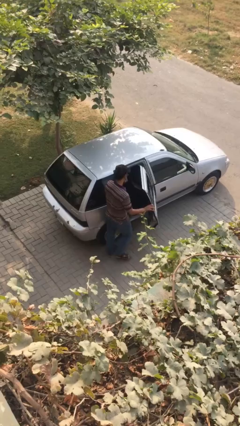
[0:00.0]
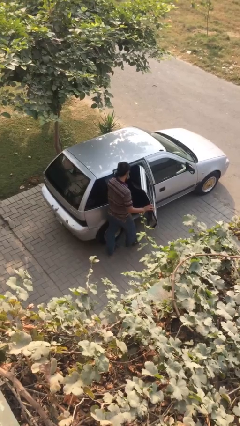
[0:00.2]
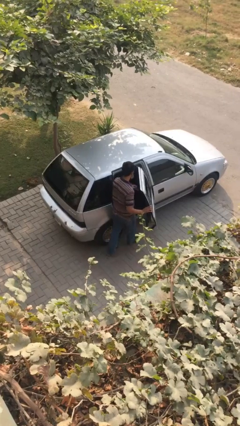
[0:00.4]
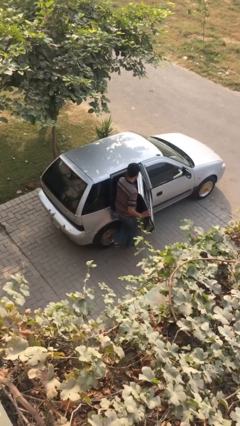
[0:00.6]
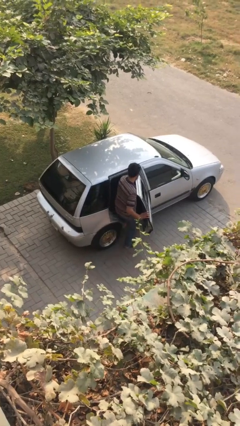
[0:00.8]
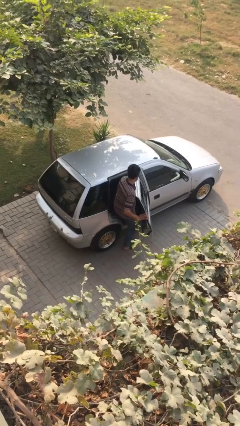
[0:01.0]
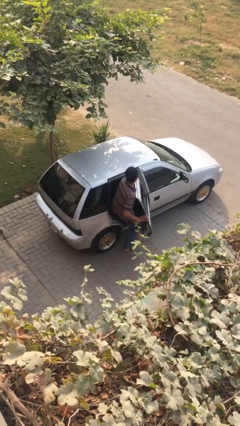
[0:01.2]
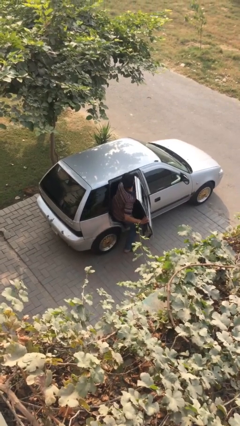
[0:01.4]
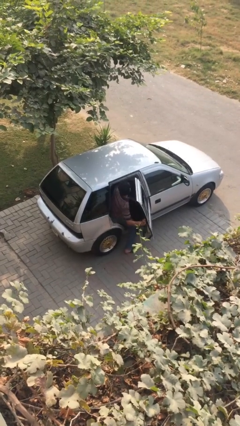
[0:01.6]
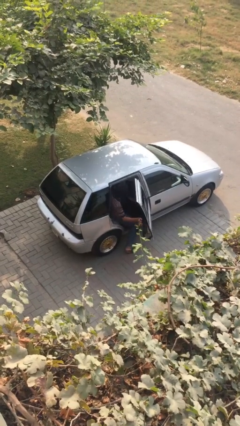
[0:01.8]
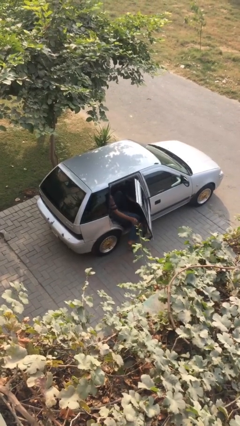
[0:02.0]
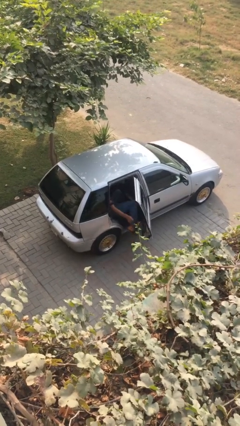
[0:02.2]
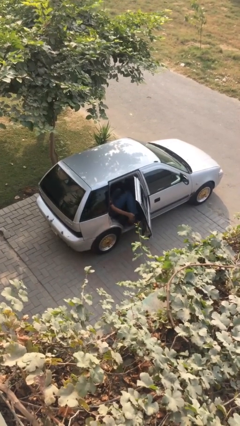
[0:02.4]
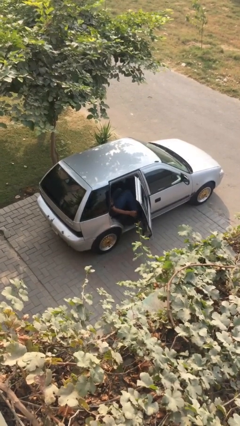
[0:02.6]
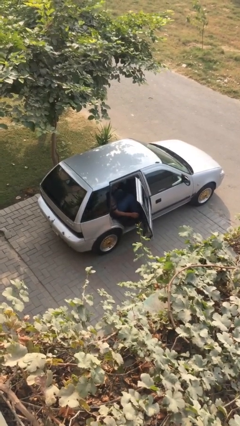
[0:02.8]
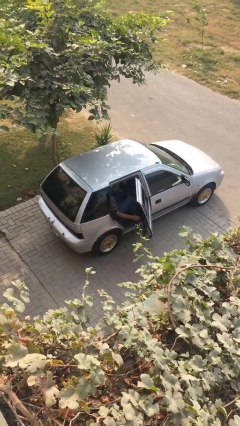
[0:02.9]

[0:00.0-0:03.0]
person enters car

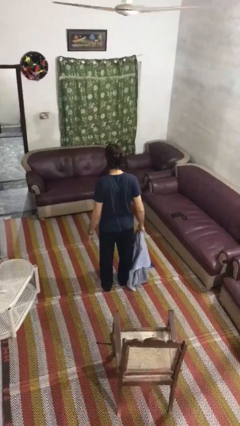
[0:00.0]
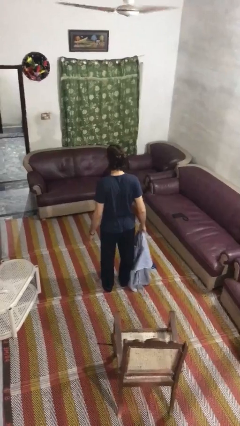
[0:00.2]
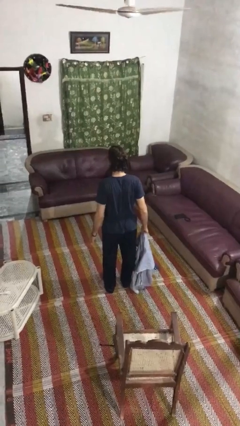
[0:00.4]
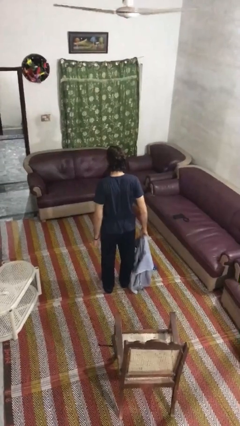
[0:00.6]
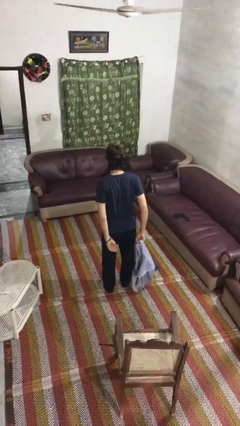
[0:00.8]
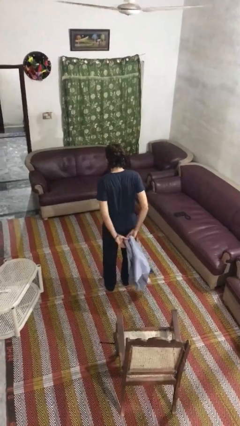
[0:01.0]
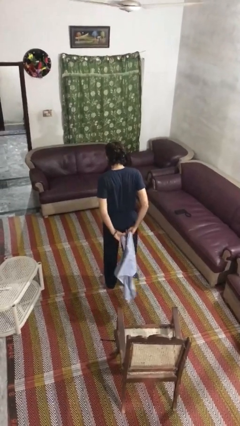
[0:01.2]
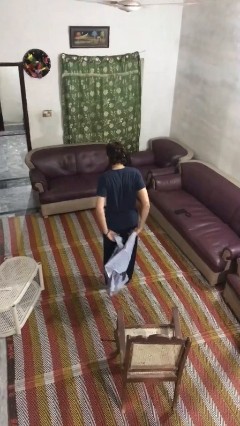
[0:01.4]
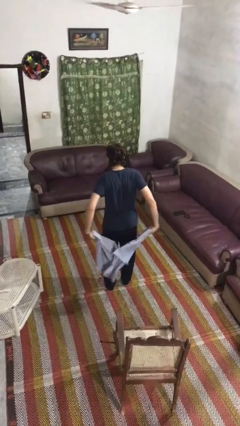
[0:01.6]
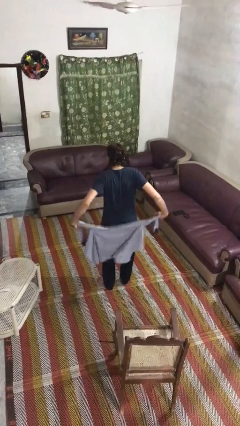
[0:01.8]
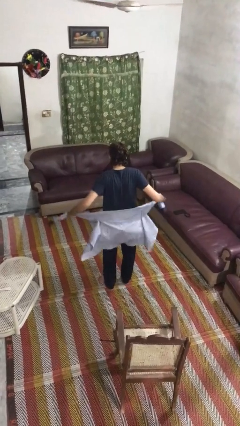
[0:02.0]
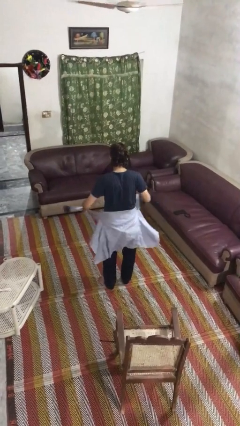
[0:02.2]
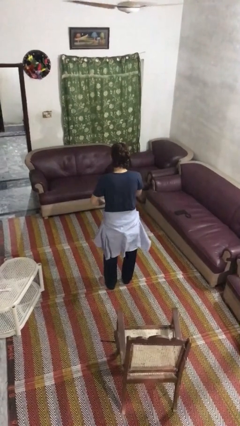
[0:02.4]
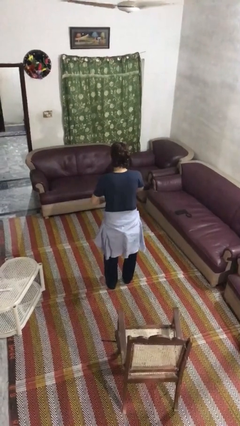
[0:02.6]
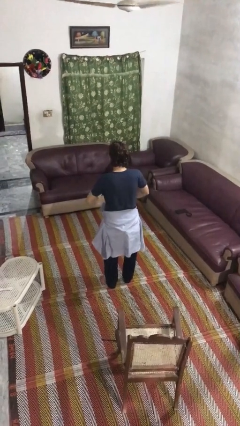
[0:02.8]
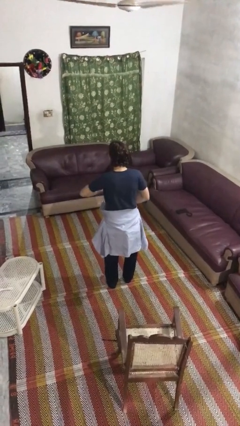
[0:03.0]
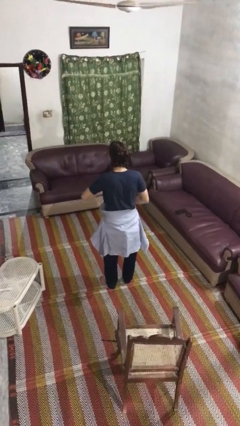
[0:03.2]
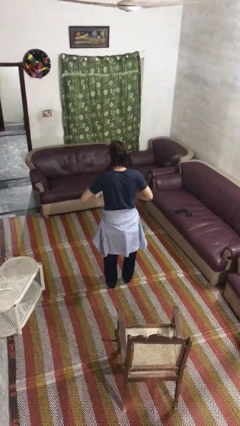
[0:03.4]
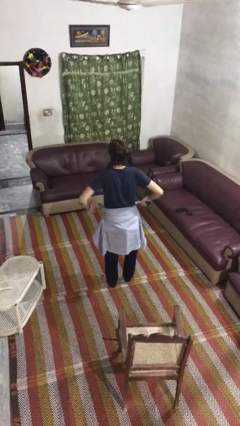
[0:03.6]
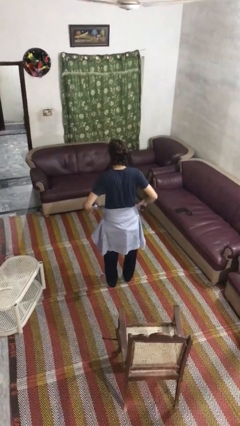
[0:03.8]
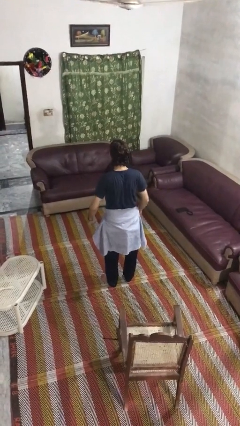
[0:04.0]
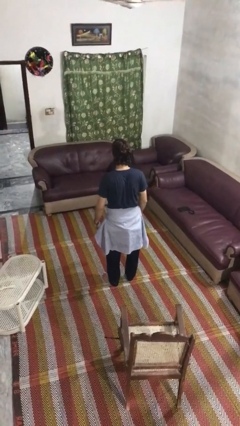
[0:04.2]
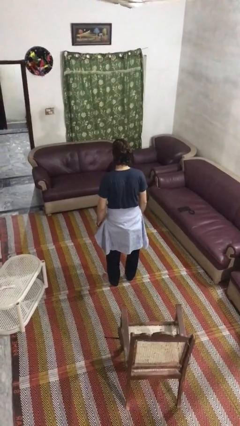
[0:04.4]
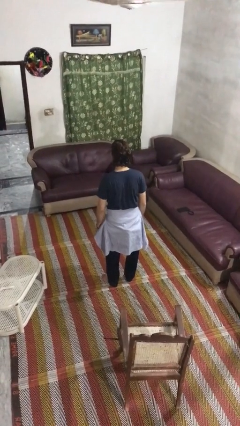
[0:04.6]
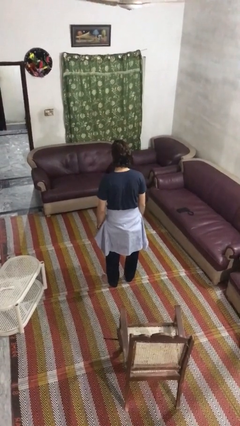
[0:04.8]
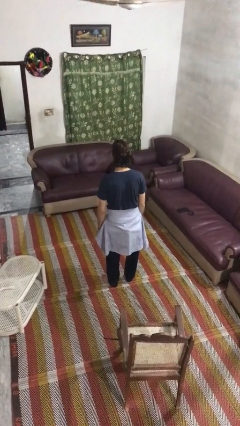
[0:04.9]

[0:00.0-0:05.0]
person ties jacket around waist

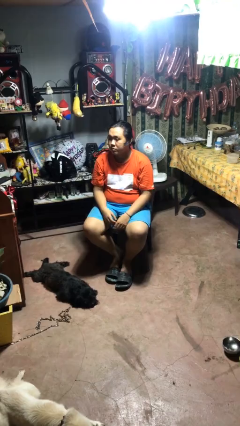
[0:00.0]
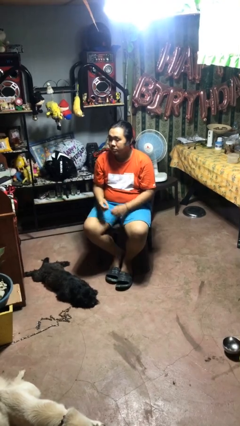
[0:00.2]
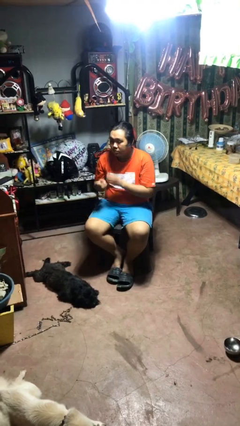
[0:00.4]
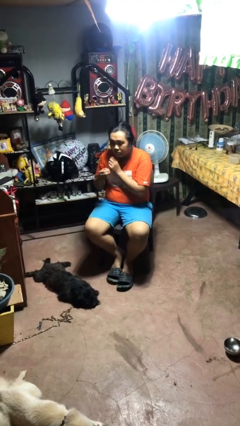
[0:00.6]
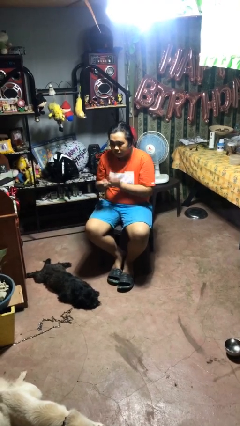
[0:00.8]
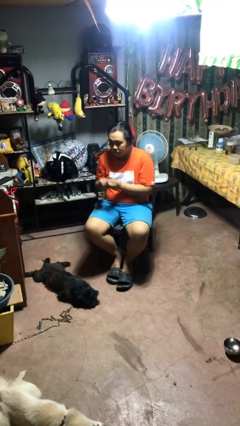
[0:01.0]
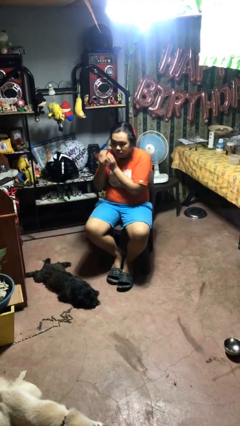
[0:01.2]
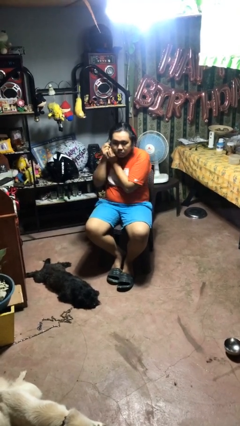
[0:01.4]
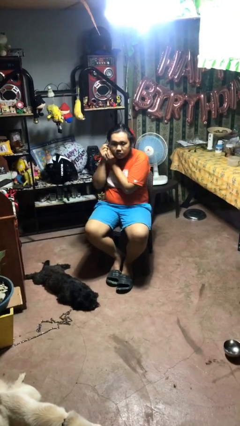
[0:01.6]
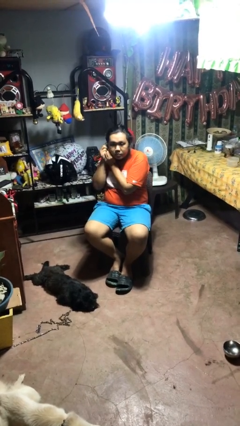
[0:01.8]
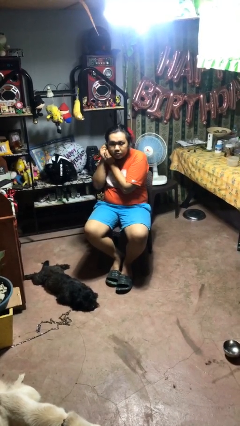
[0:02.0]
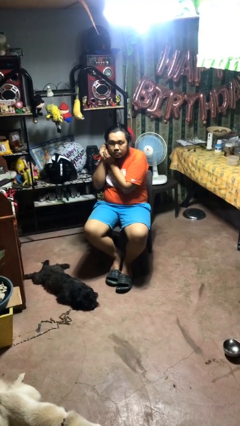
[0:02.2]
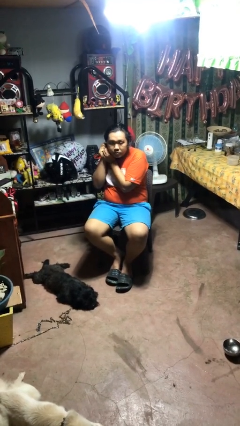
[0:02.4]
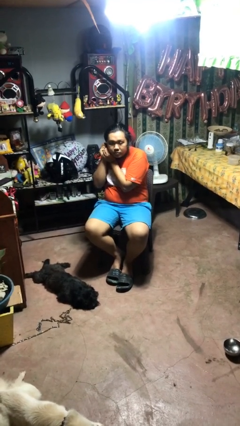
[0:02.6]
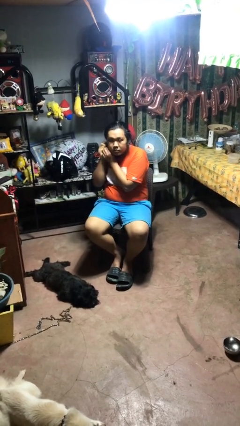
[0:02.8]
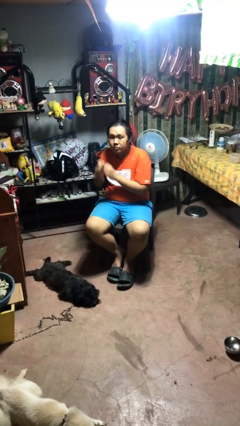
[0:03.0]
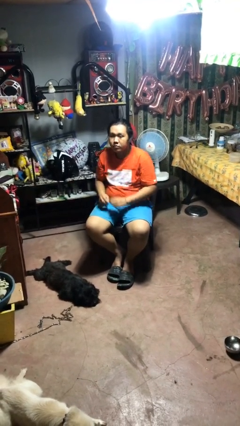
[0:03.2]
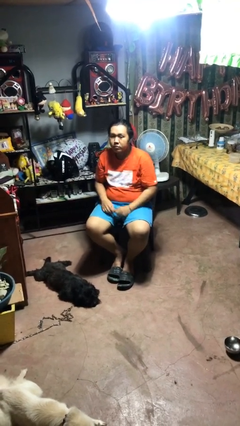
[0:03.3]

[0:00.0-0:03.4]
person puts on earrings

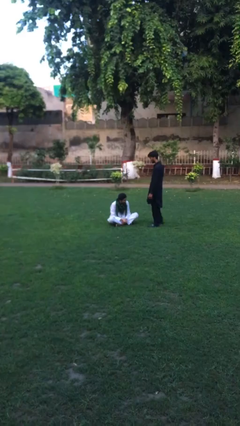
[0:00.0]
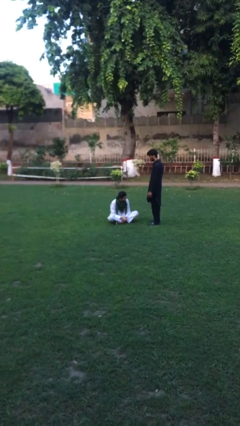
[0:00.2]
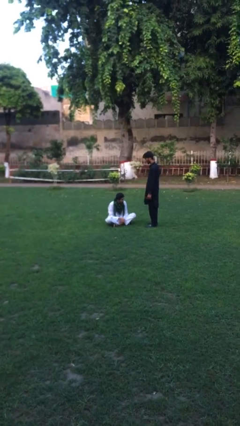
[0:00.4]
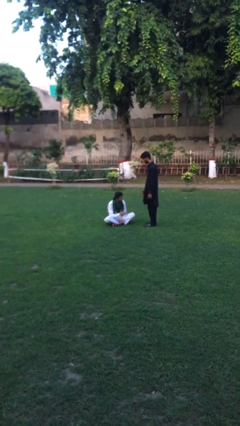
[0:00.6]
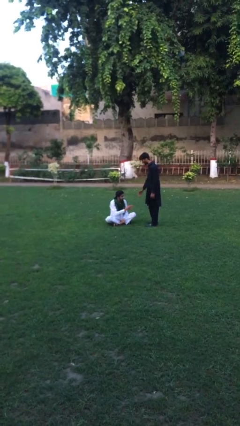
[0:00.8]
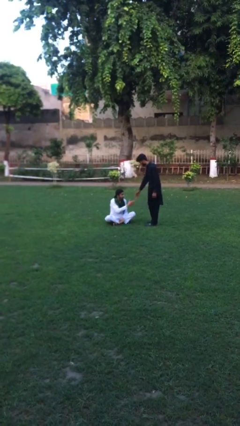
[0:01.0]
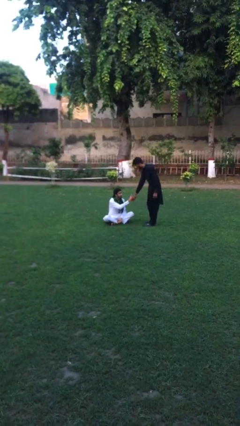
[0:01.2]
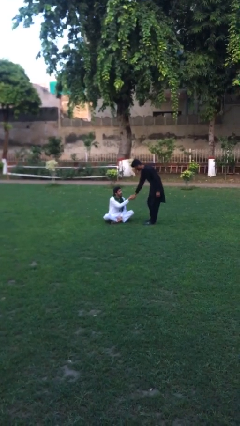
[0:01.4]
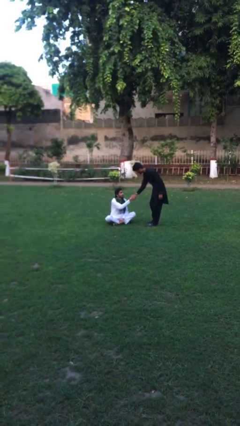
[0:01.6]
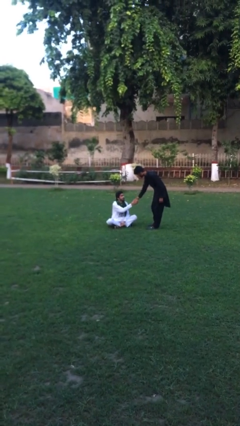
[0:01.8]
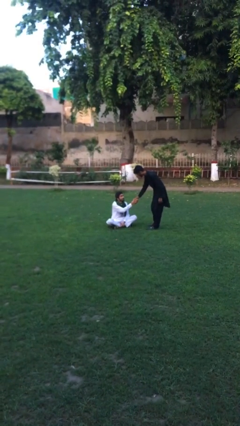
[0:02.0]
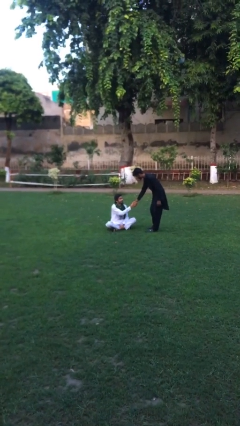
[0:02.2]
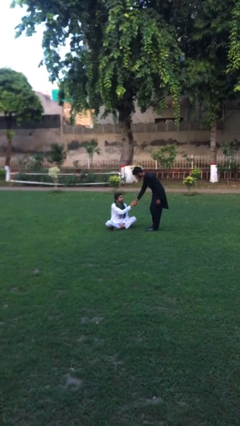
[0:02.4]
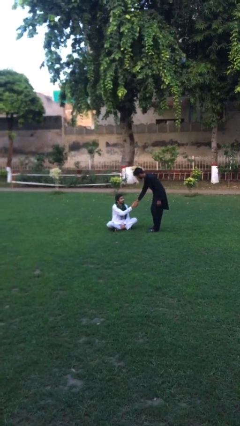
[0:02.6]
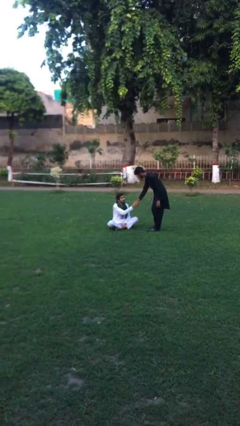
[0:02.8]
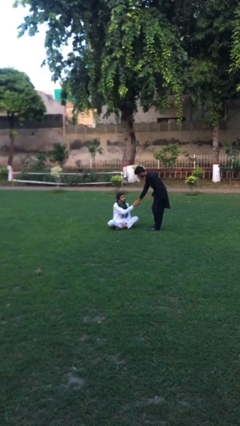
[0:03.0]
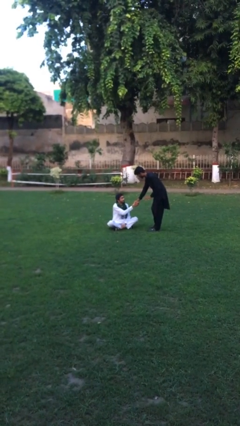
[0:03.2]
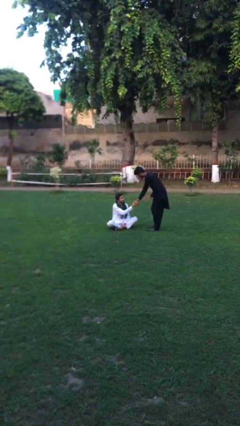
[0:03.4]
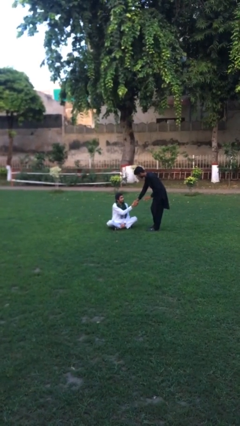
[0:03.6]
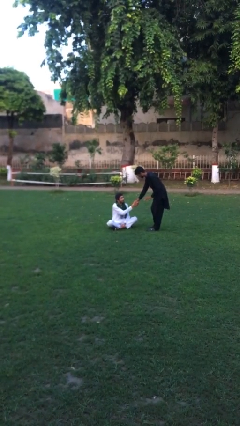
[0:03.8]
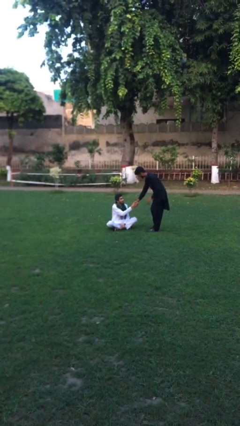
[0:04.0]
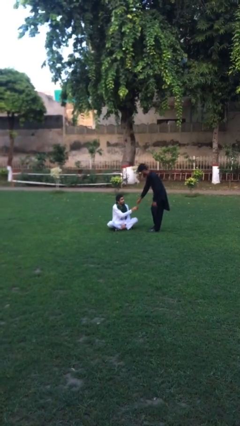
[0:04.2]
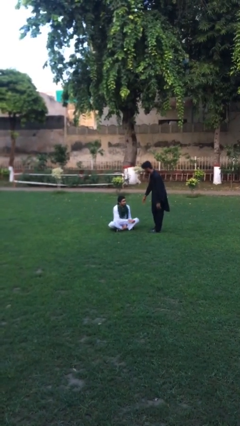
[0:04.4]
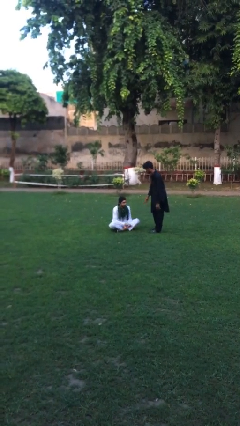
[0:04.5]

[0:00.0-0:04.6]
person shakes hand

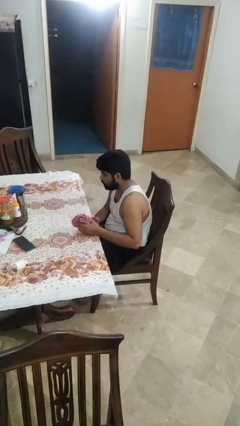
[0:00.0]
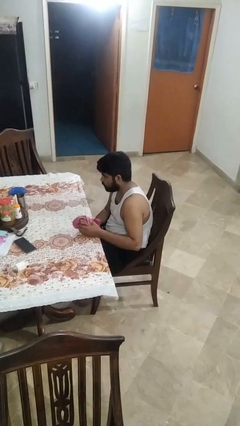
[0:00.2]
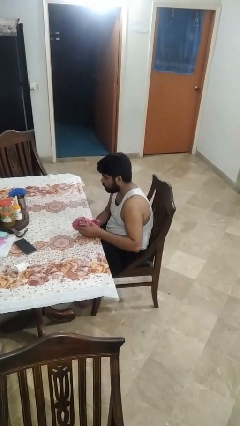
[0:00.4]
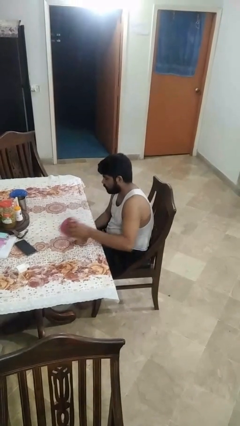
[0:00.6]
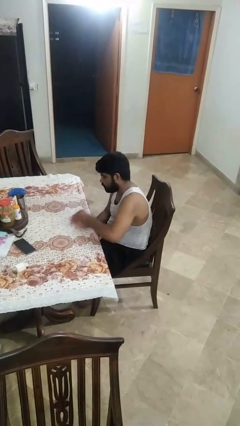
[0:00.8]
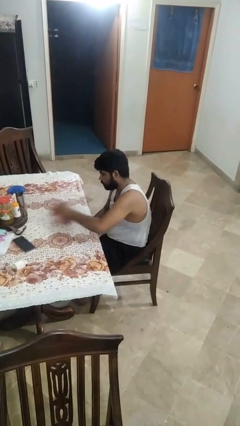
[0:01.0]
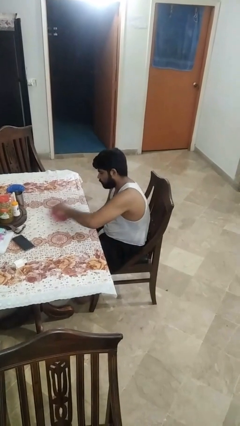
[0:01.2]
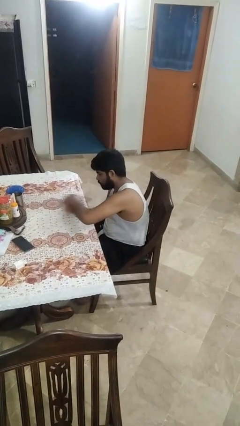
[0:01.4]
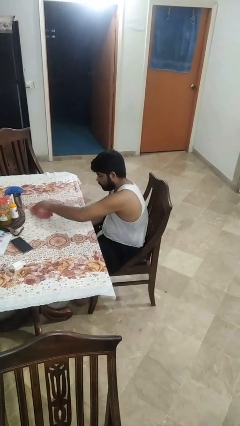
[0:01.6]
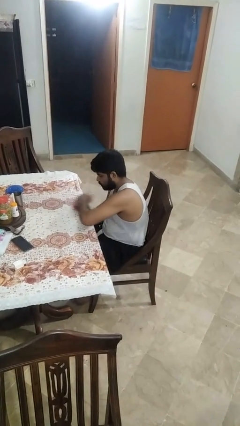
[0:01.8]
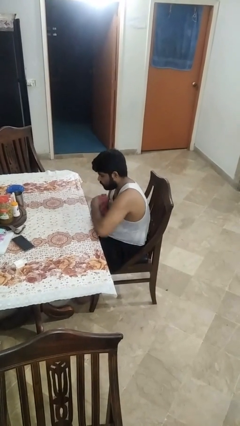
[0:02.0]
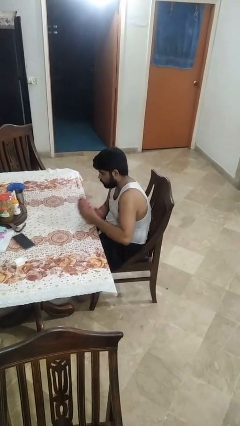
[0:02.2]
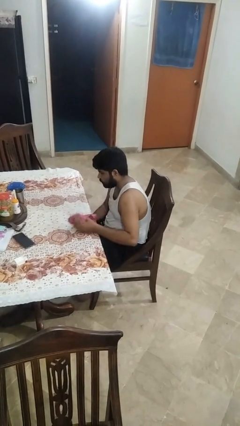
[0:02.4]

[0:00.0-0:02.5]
person cleans table with rag
